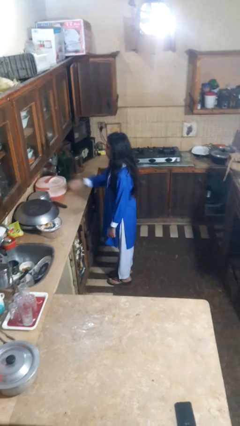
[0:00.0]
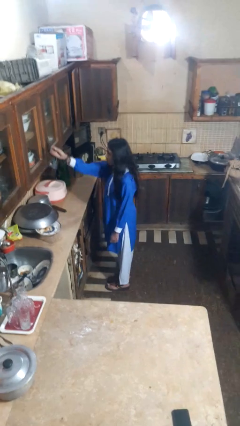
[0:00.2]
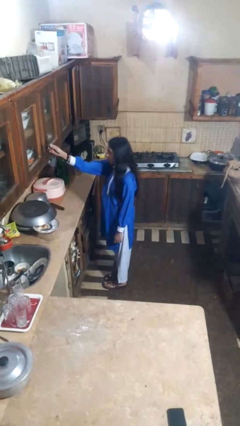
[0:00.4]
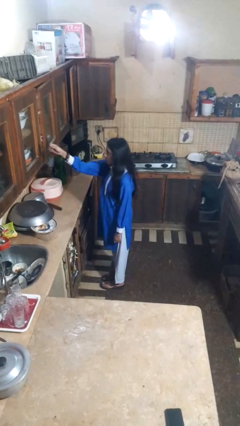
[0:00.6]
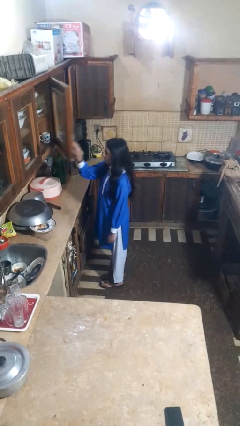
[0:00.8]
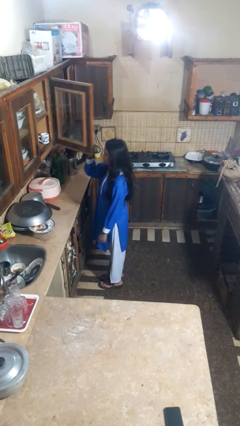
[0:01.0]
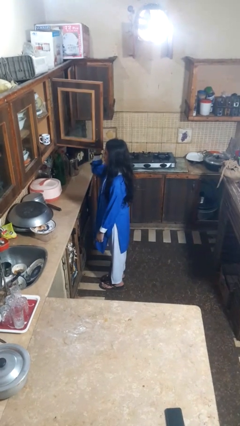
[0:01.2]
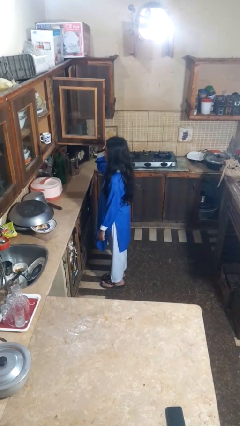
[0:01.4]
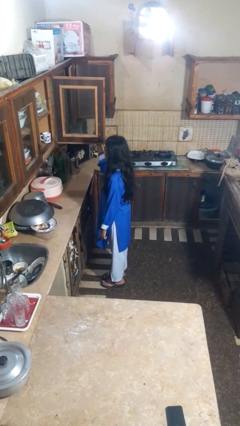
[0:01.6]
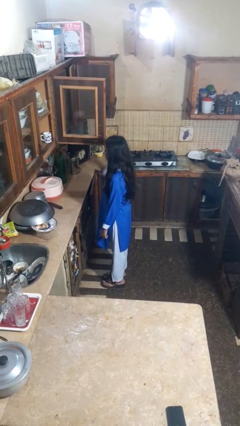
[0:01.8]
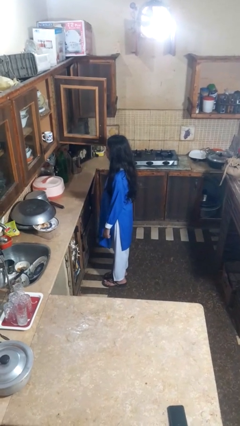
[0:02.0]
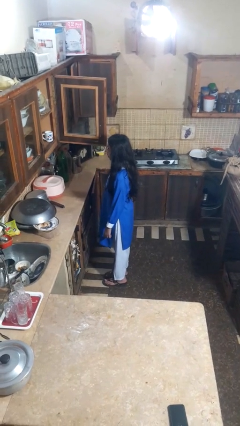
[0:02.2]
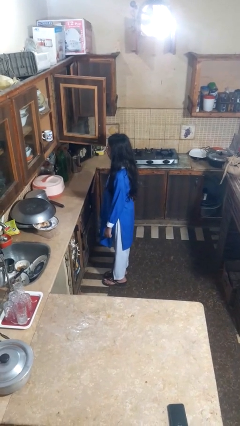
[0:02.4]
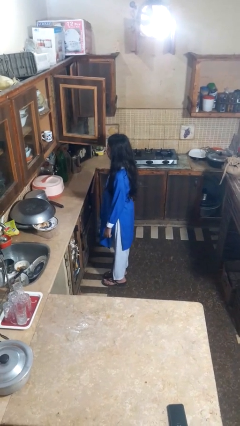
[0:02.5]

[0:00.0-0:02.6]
person opens cabinet

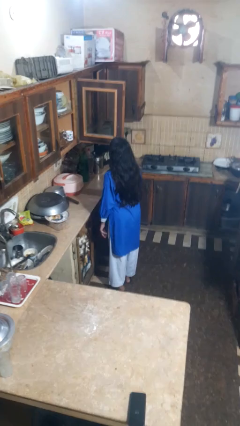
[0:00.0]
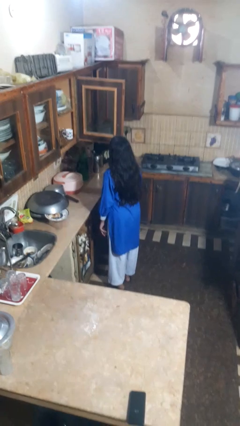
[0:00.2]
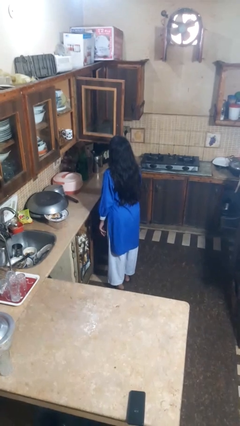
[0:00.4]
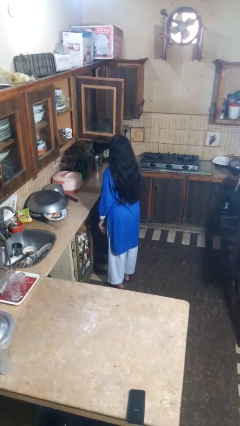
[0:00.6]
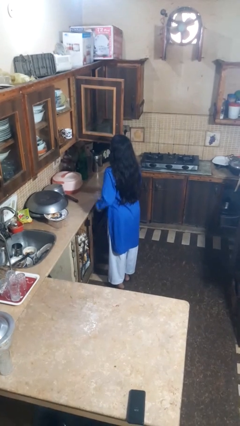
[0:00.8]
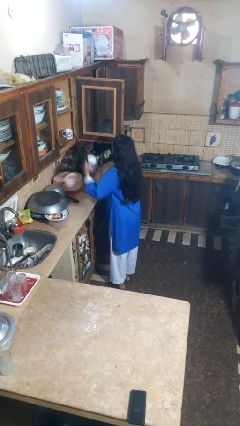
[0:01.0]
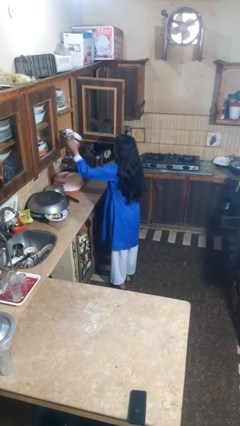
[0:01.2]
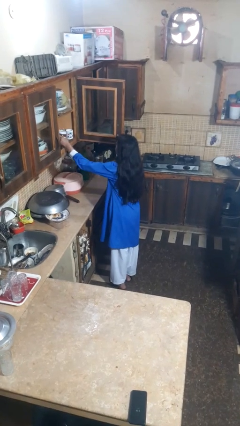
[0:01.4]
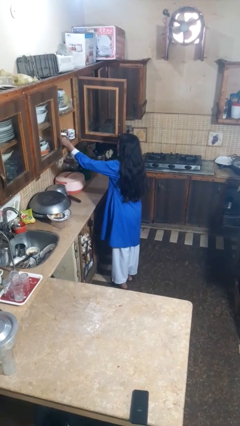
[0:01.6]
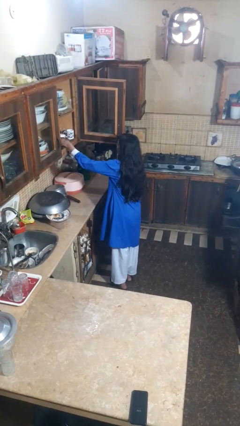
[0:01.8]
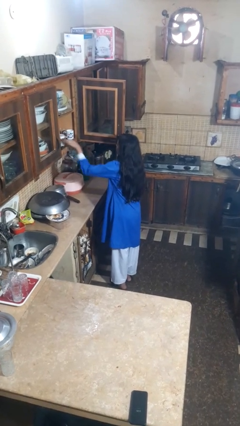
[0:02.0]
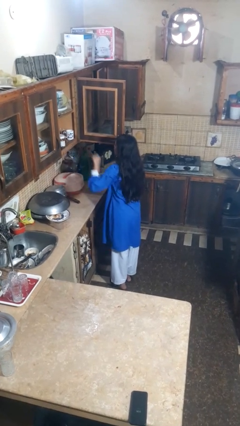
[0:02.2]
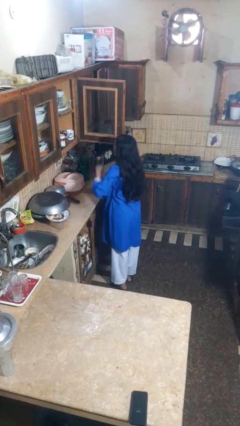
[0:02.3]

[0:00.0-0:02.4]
person puts object in cabinet

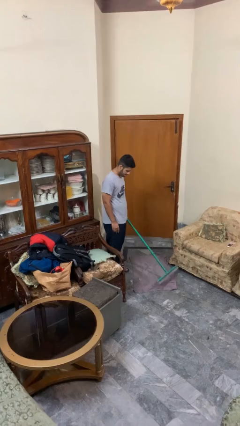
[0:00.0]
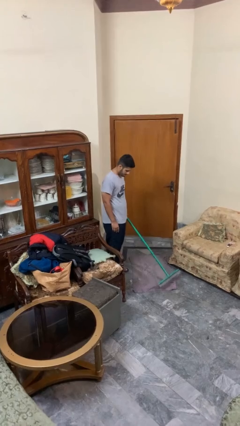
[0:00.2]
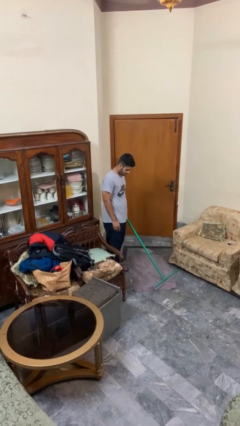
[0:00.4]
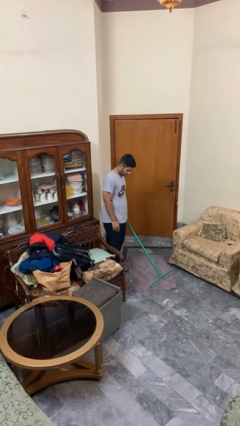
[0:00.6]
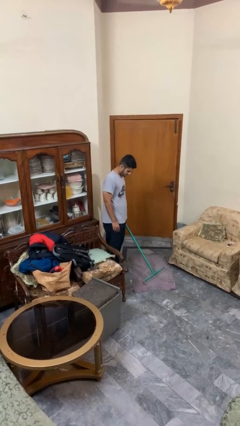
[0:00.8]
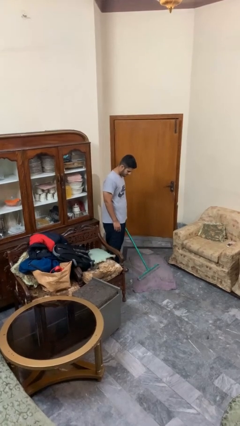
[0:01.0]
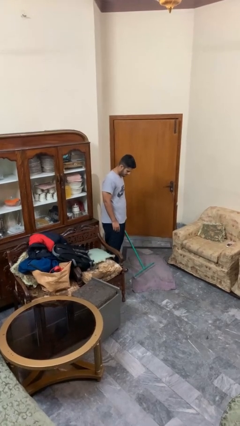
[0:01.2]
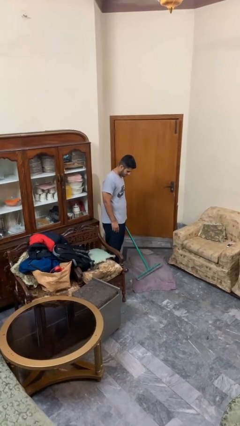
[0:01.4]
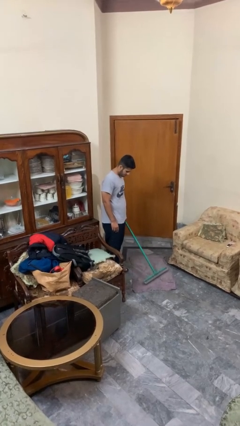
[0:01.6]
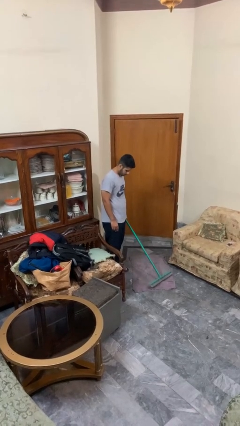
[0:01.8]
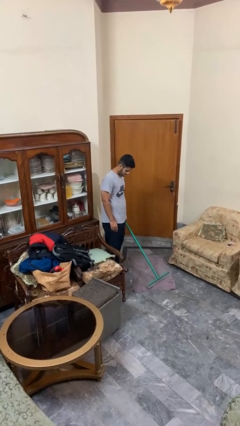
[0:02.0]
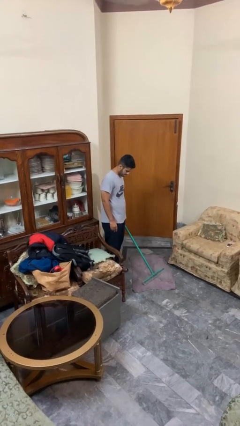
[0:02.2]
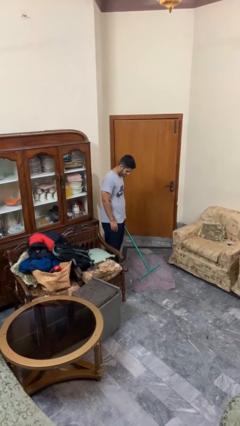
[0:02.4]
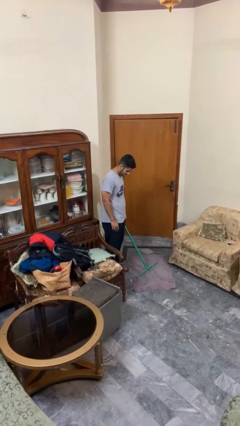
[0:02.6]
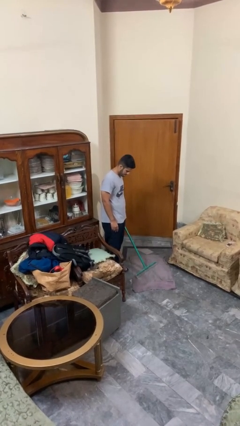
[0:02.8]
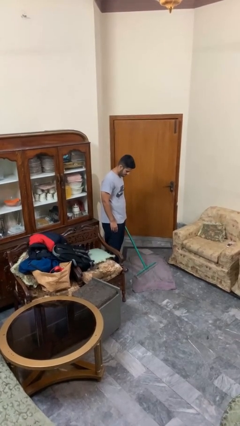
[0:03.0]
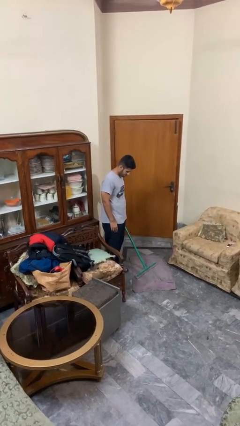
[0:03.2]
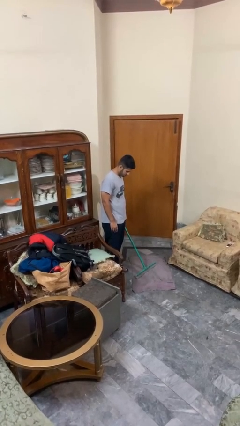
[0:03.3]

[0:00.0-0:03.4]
person vacuums carpet

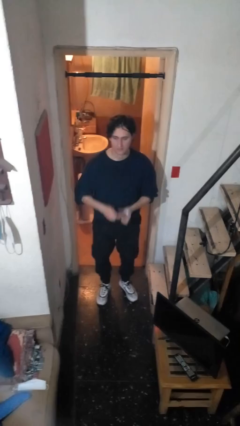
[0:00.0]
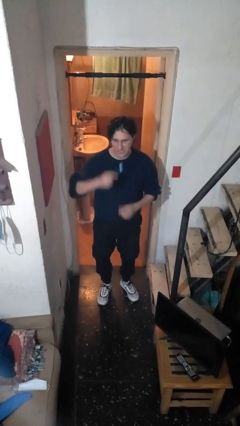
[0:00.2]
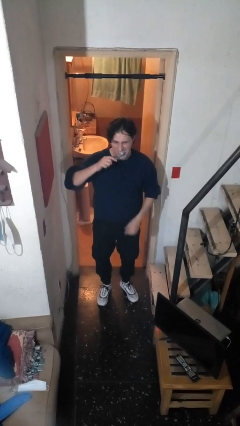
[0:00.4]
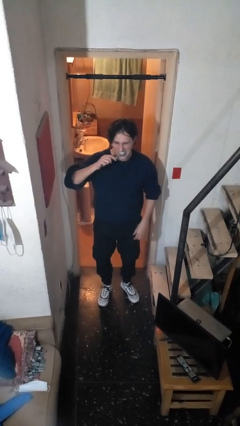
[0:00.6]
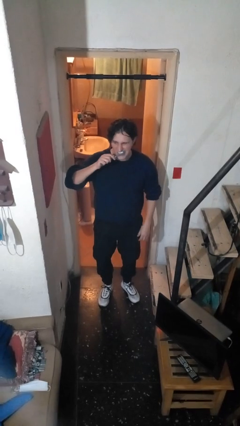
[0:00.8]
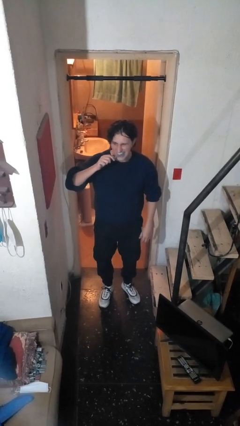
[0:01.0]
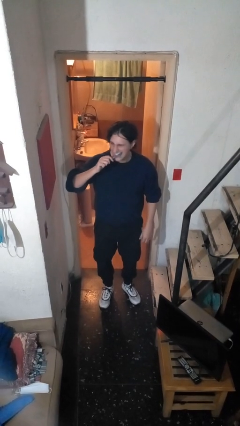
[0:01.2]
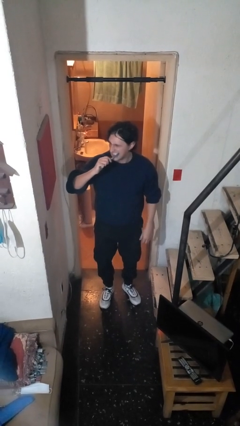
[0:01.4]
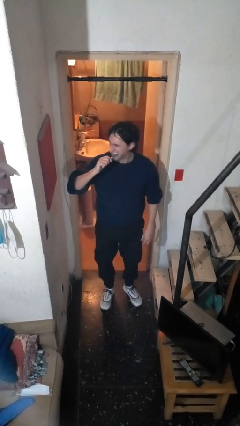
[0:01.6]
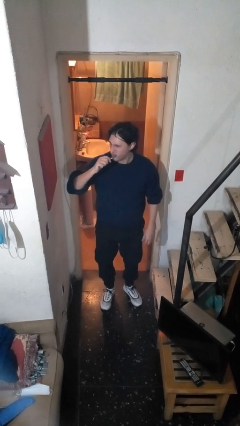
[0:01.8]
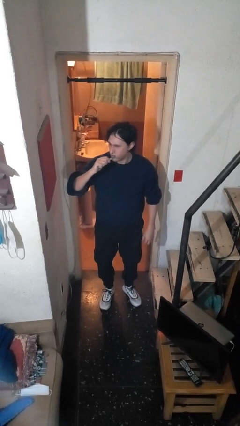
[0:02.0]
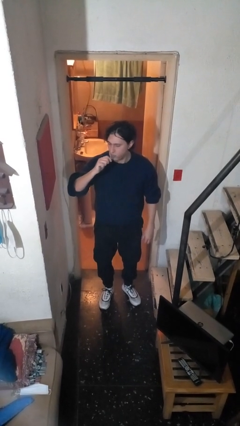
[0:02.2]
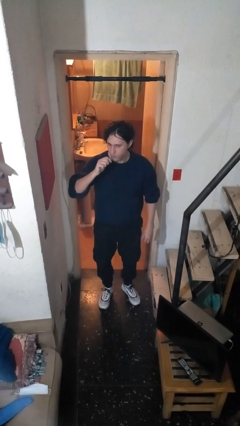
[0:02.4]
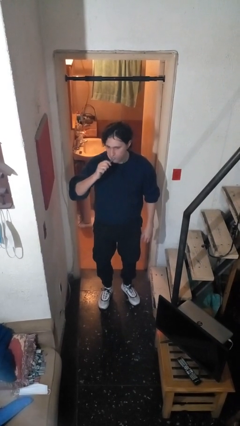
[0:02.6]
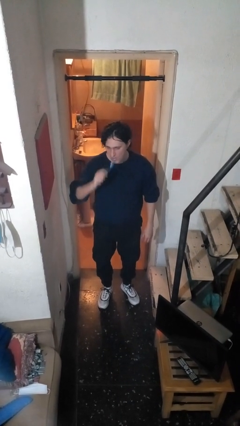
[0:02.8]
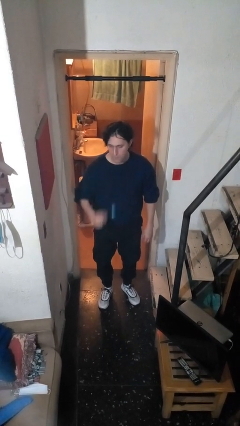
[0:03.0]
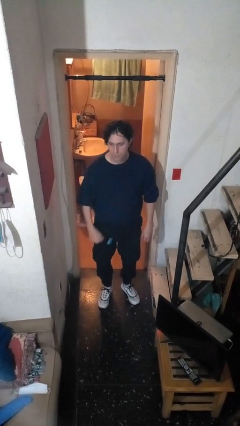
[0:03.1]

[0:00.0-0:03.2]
person brushes teeth

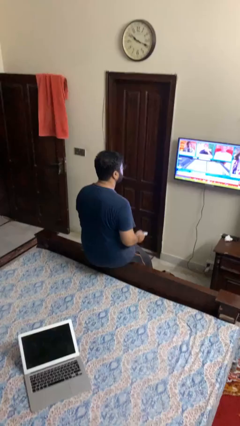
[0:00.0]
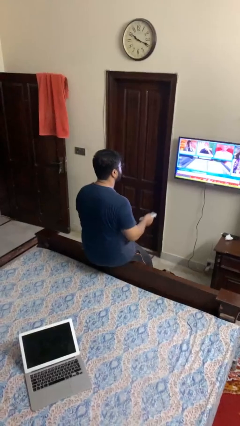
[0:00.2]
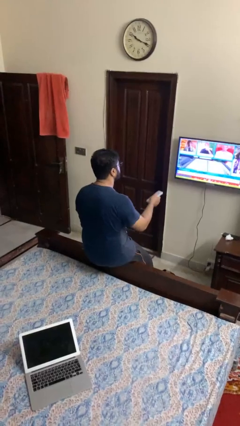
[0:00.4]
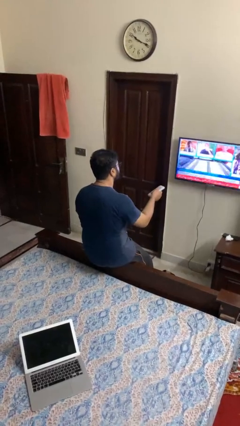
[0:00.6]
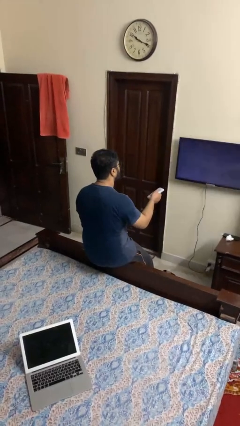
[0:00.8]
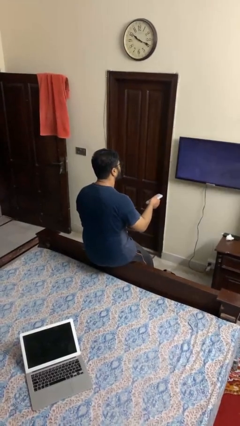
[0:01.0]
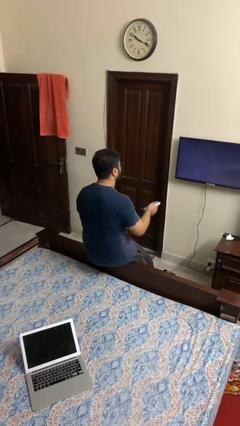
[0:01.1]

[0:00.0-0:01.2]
person uses television remote

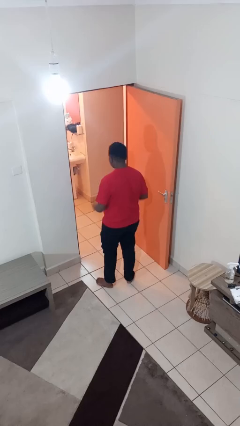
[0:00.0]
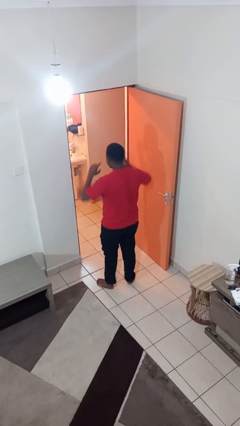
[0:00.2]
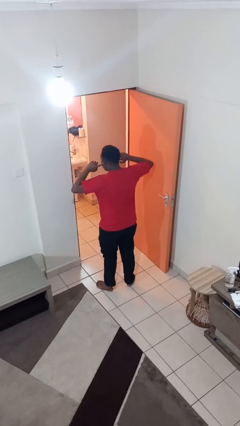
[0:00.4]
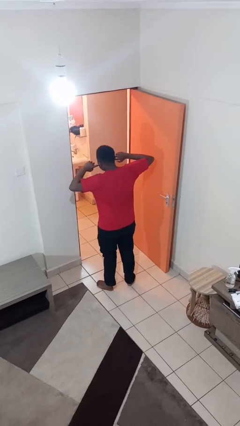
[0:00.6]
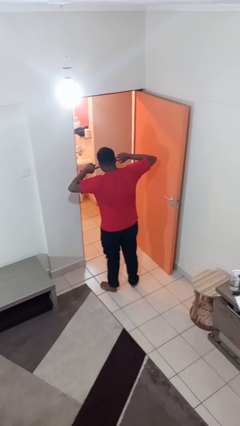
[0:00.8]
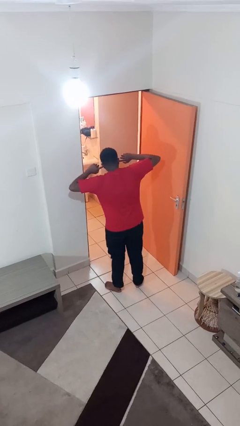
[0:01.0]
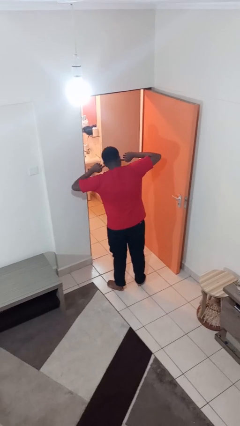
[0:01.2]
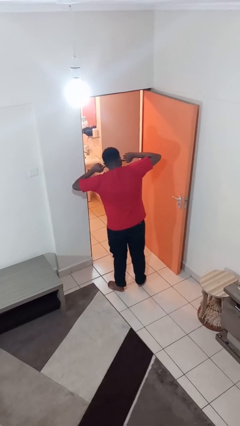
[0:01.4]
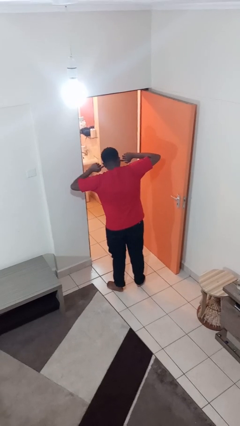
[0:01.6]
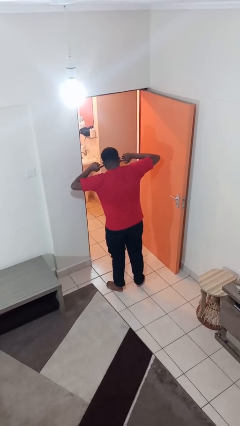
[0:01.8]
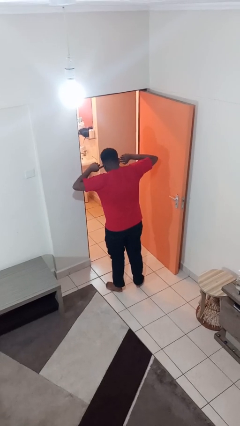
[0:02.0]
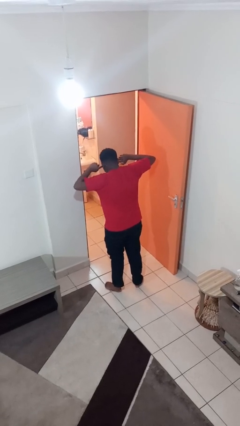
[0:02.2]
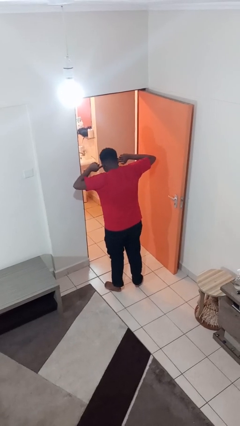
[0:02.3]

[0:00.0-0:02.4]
person puts fingers in ear

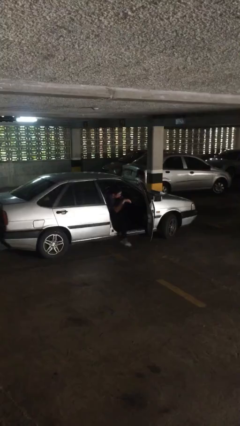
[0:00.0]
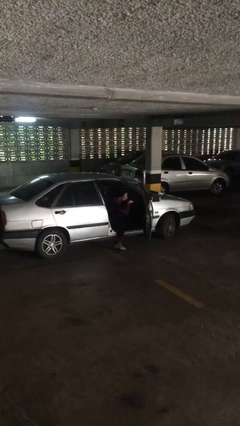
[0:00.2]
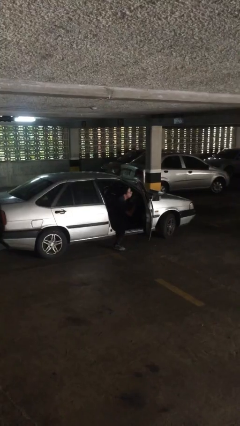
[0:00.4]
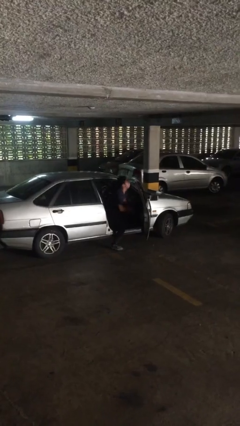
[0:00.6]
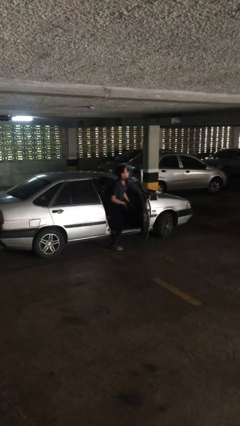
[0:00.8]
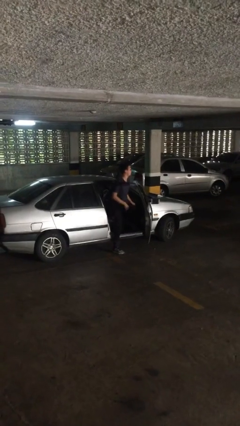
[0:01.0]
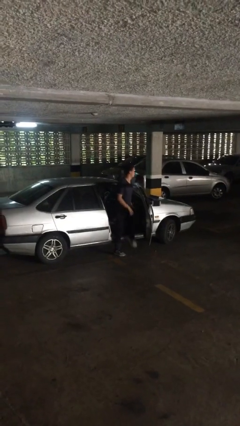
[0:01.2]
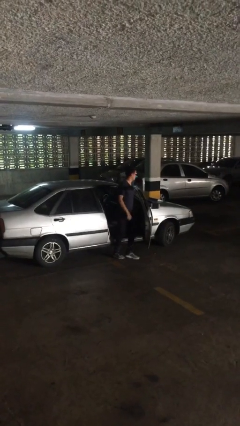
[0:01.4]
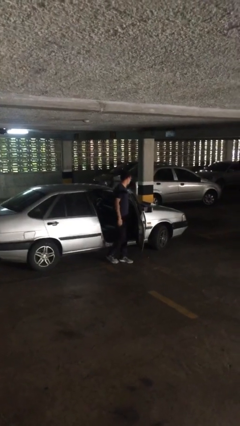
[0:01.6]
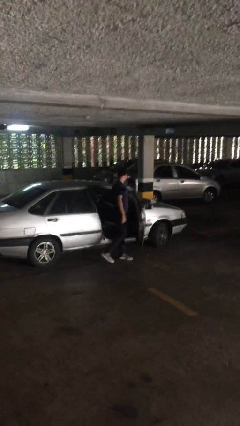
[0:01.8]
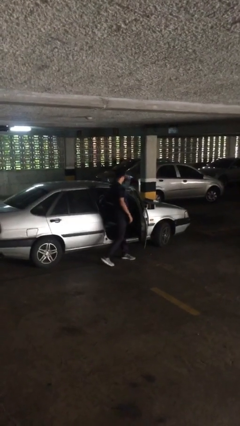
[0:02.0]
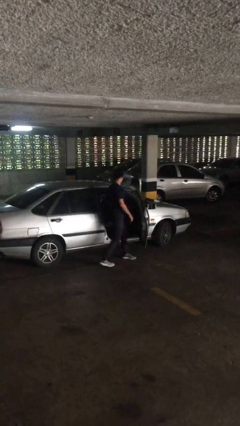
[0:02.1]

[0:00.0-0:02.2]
person exits car
